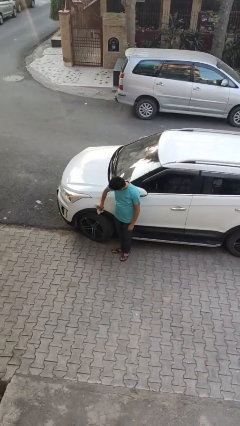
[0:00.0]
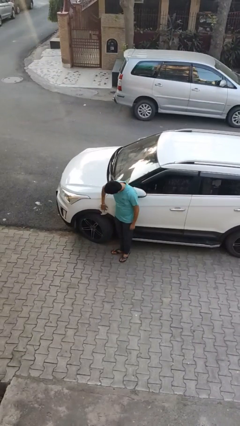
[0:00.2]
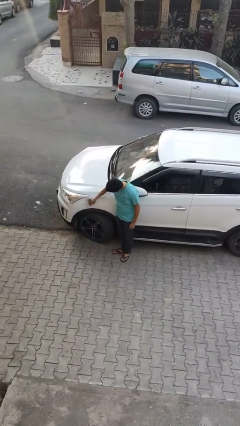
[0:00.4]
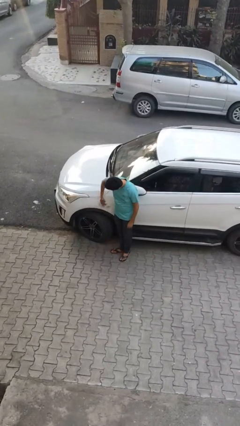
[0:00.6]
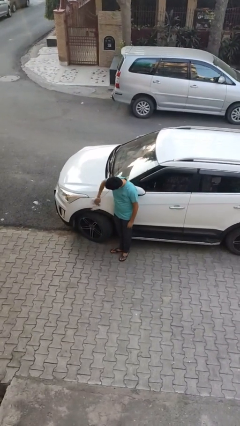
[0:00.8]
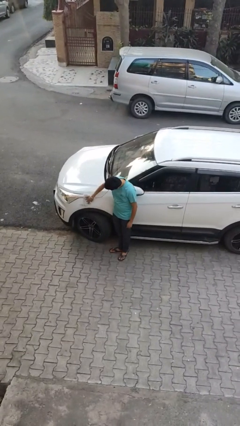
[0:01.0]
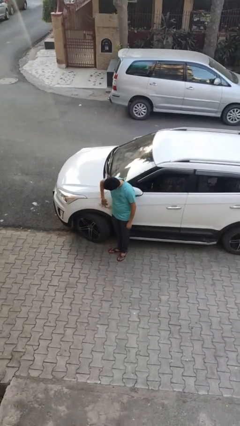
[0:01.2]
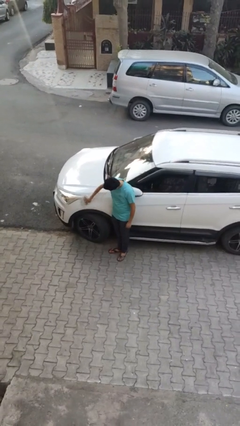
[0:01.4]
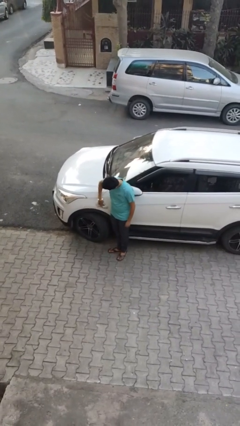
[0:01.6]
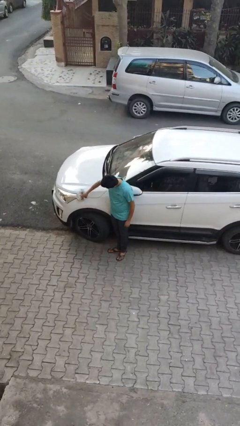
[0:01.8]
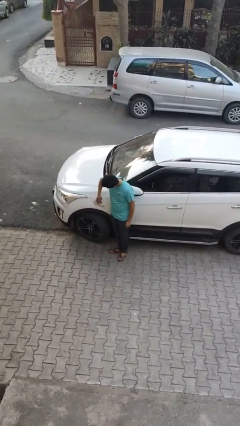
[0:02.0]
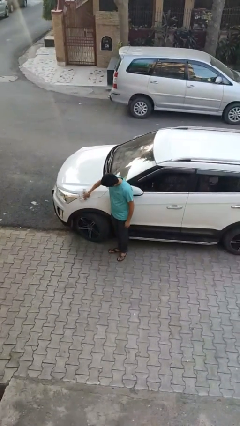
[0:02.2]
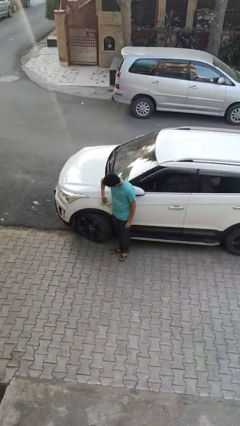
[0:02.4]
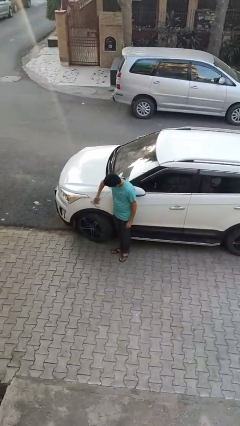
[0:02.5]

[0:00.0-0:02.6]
person polishes car with rag

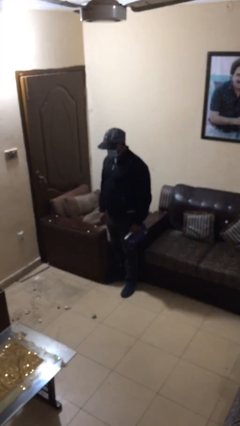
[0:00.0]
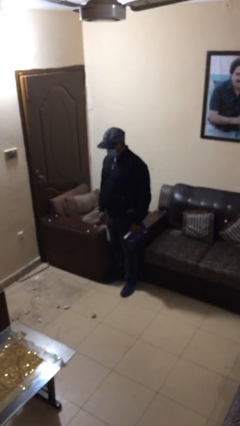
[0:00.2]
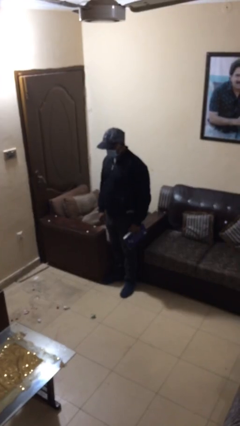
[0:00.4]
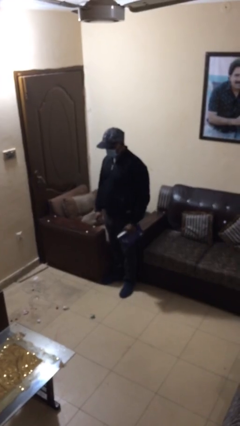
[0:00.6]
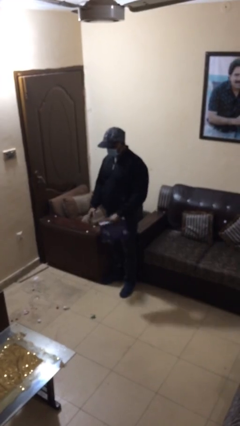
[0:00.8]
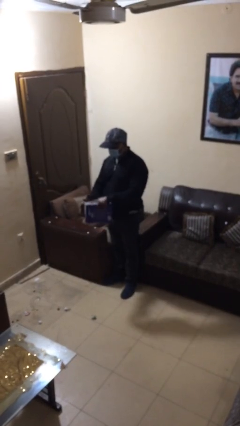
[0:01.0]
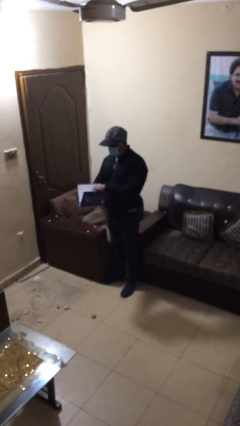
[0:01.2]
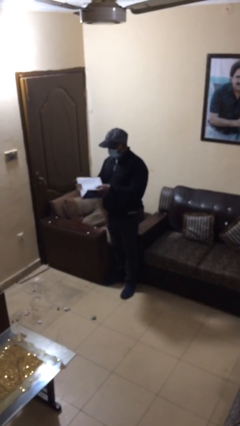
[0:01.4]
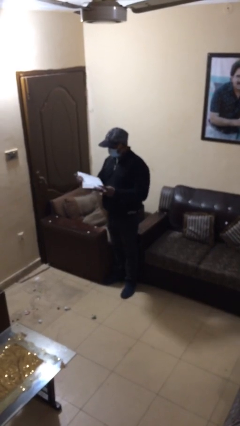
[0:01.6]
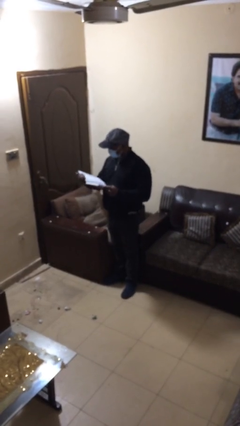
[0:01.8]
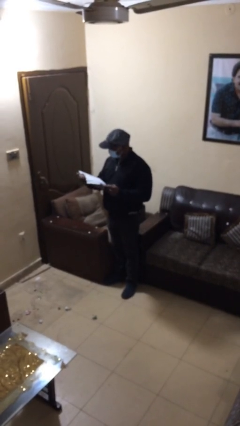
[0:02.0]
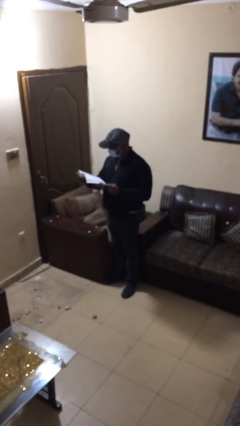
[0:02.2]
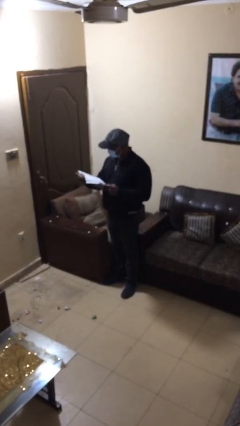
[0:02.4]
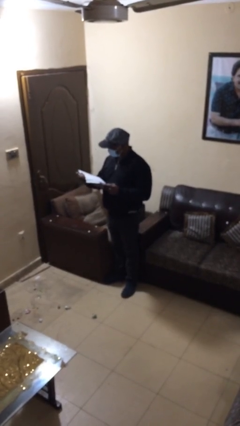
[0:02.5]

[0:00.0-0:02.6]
person reads document

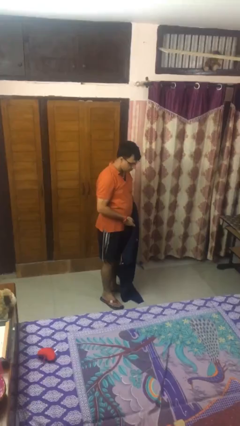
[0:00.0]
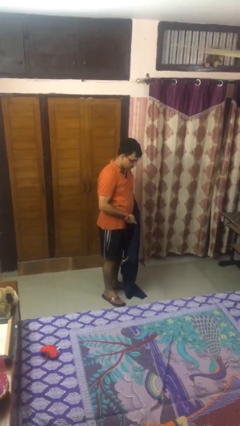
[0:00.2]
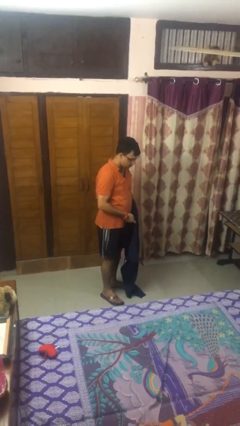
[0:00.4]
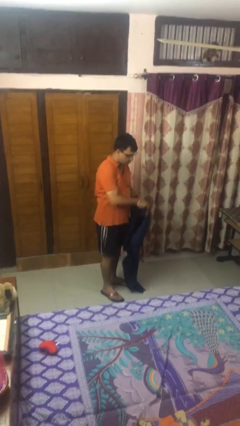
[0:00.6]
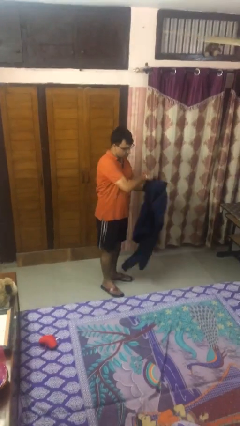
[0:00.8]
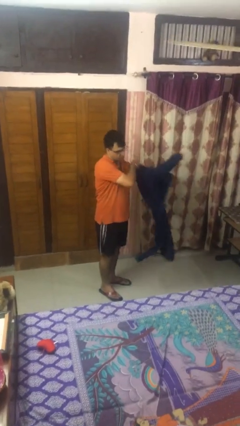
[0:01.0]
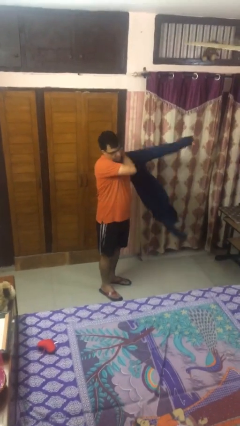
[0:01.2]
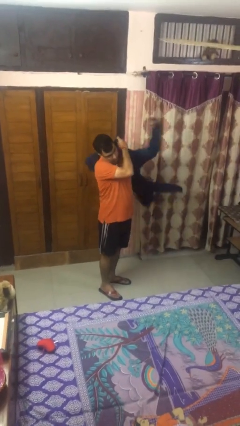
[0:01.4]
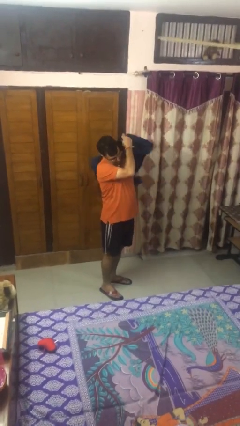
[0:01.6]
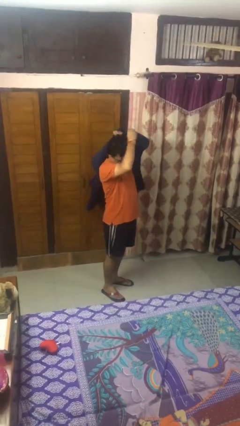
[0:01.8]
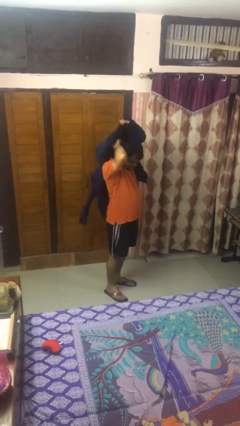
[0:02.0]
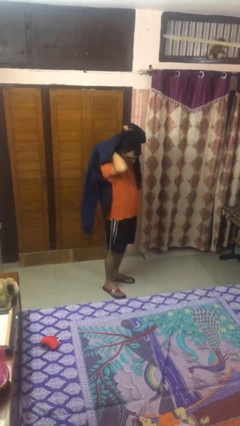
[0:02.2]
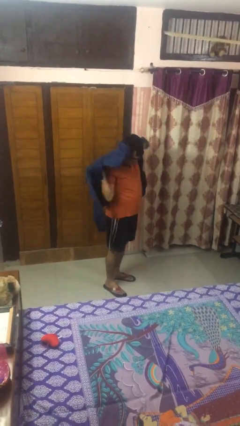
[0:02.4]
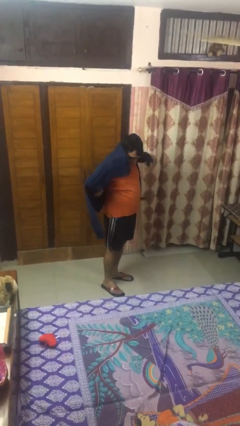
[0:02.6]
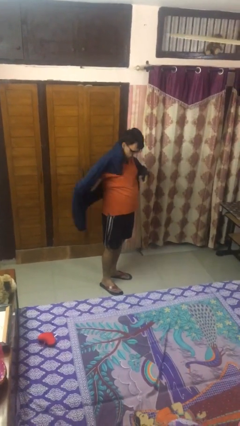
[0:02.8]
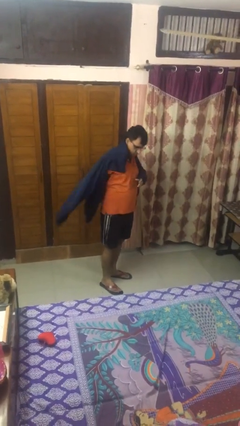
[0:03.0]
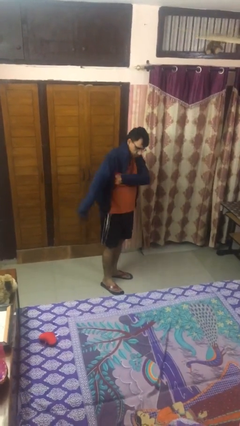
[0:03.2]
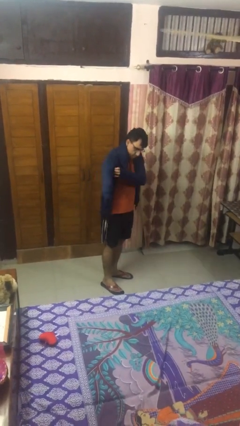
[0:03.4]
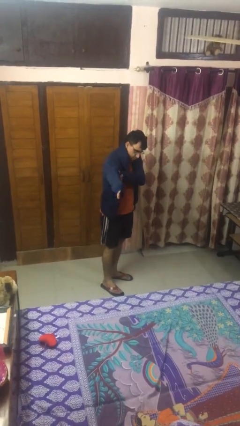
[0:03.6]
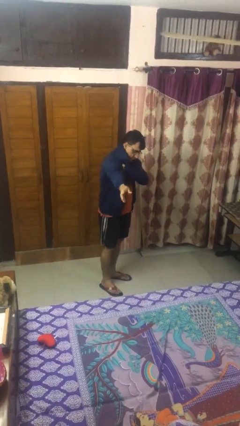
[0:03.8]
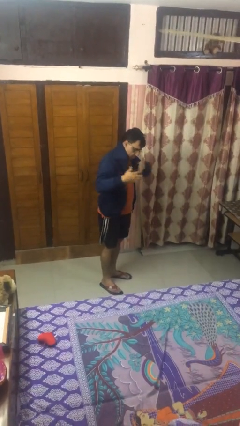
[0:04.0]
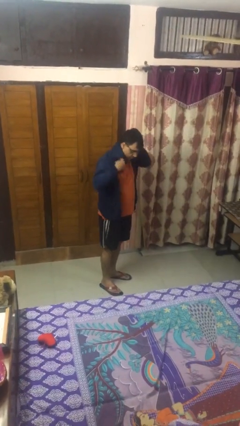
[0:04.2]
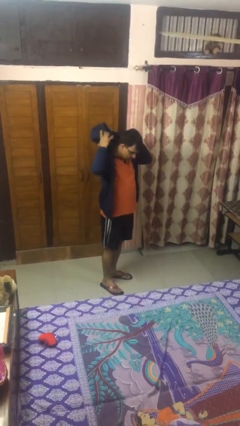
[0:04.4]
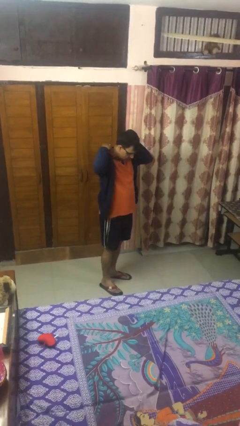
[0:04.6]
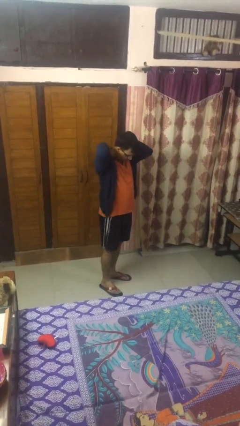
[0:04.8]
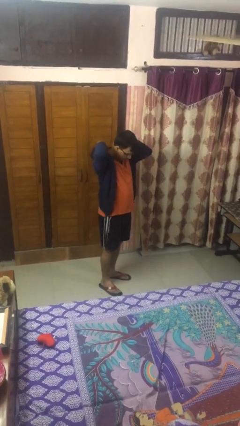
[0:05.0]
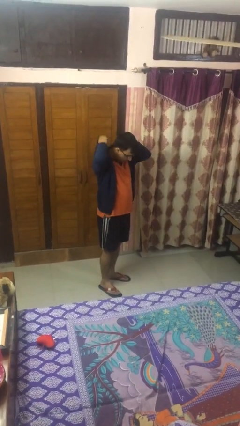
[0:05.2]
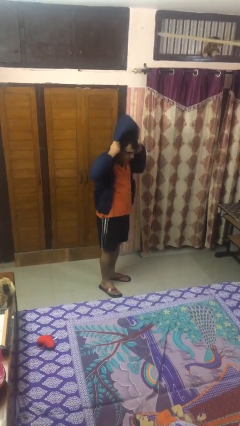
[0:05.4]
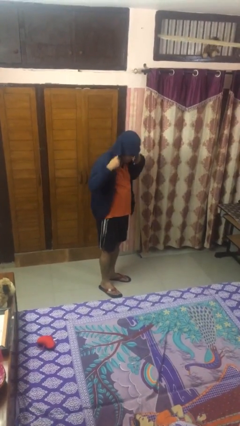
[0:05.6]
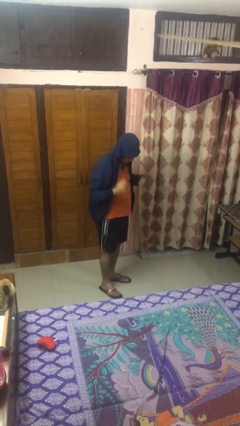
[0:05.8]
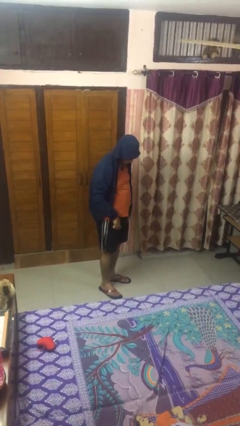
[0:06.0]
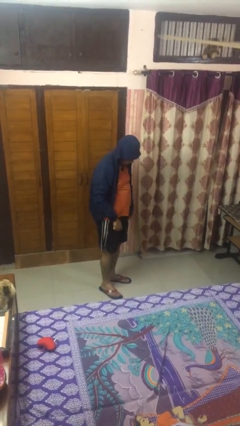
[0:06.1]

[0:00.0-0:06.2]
person puts on hoodie

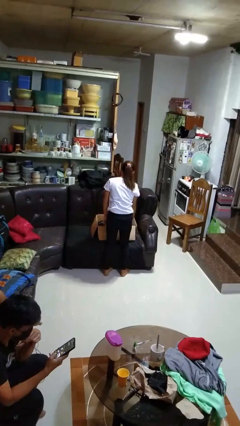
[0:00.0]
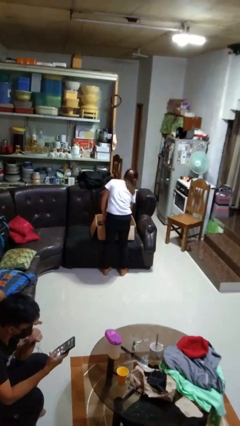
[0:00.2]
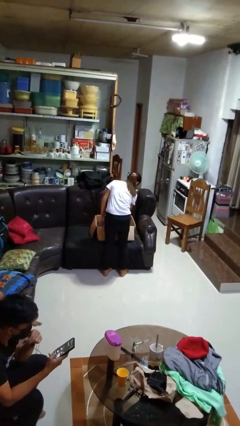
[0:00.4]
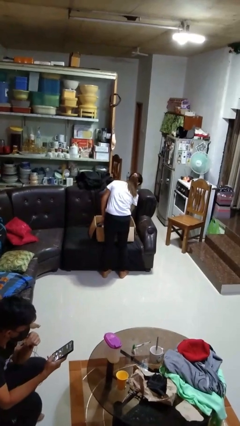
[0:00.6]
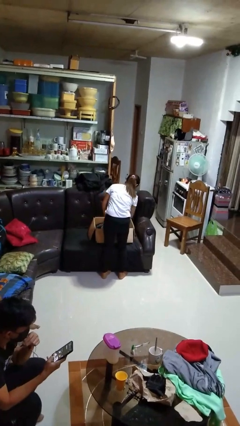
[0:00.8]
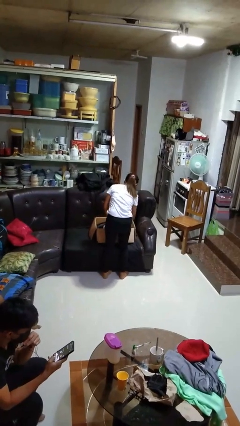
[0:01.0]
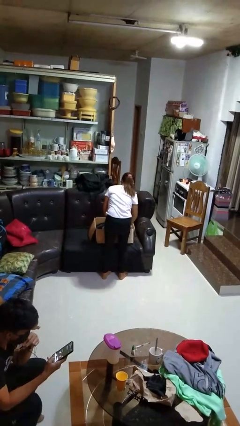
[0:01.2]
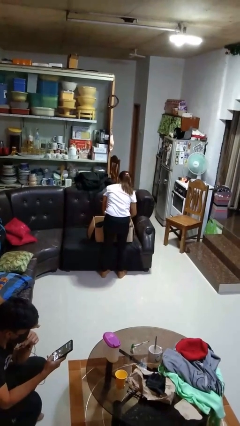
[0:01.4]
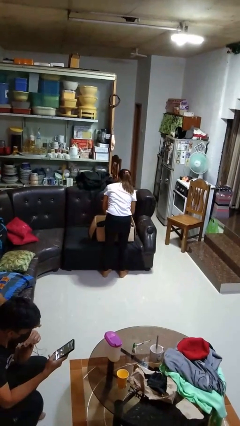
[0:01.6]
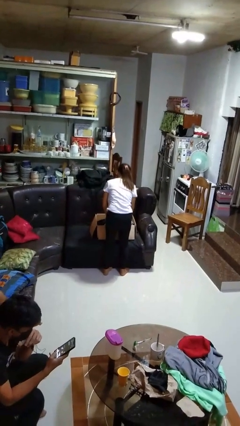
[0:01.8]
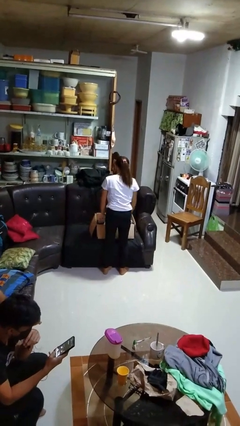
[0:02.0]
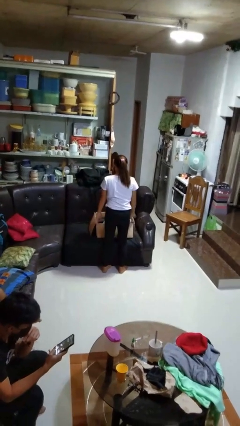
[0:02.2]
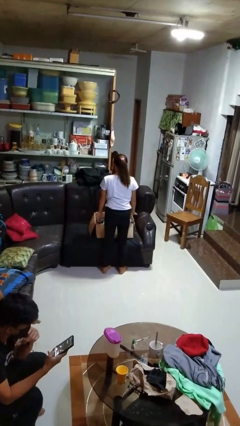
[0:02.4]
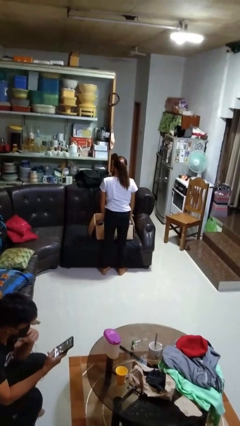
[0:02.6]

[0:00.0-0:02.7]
person searches in box

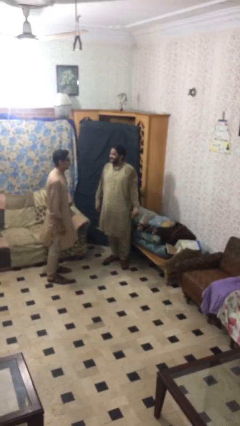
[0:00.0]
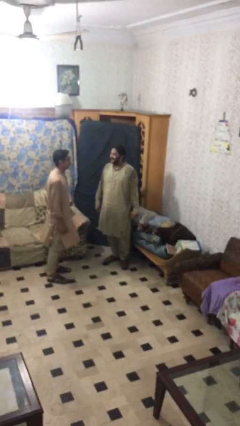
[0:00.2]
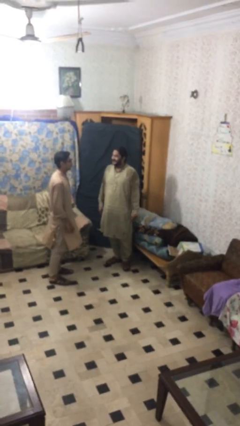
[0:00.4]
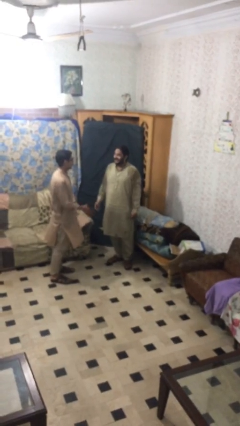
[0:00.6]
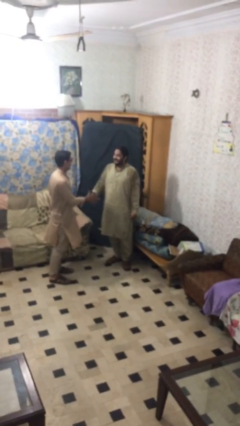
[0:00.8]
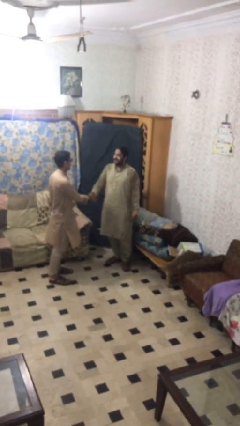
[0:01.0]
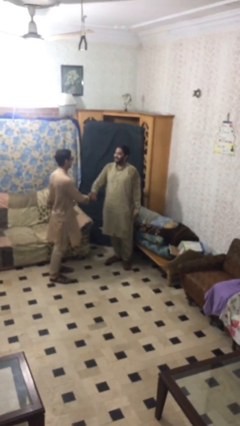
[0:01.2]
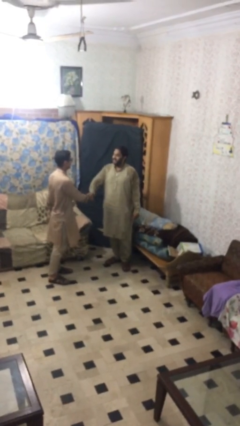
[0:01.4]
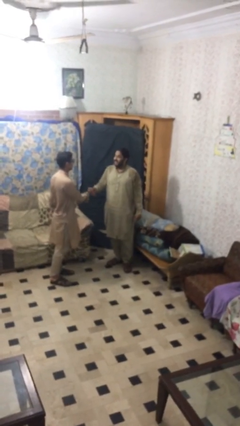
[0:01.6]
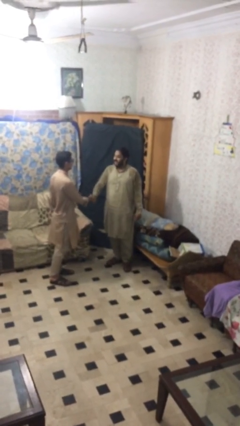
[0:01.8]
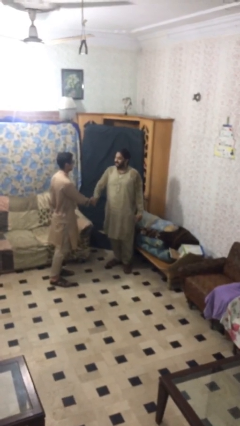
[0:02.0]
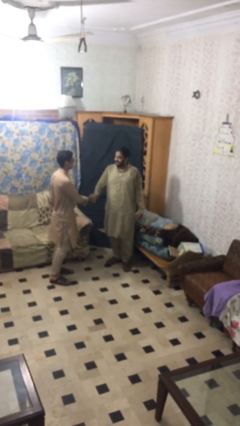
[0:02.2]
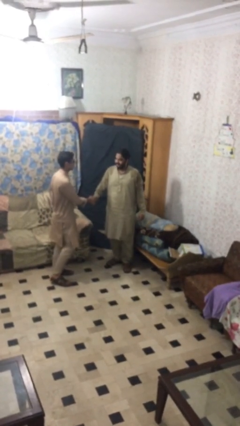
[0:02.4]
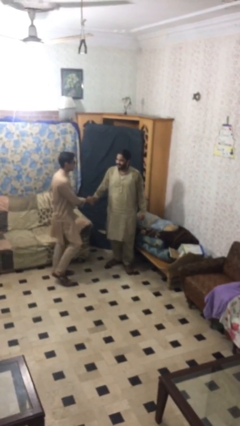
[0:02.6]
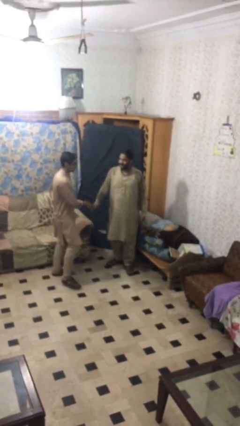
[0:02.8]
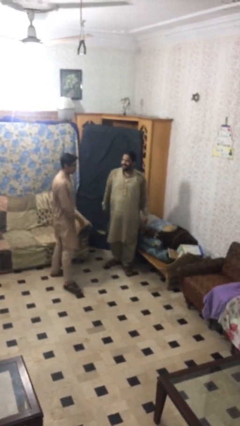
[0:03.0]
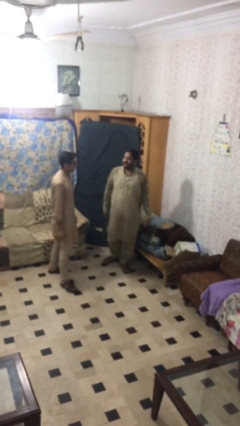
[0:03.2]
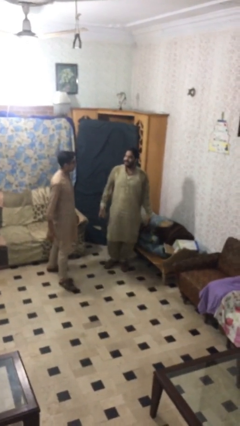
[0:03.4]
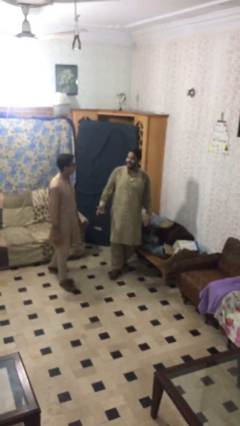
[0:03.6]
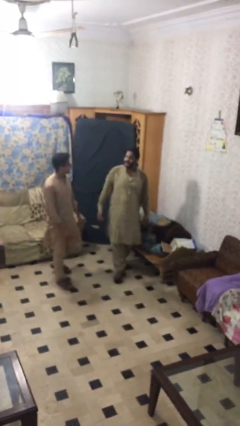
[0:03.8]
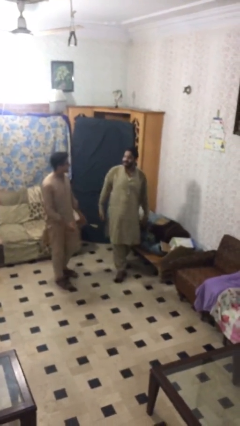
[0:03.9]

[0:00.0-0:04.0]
person shakes hand
